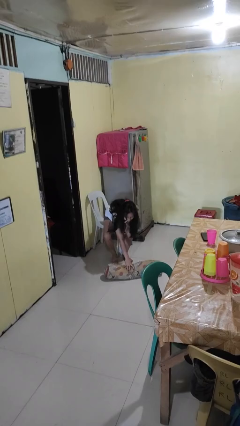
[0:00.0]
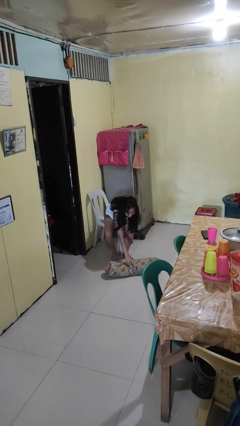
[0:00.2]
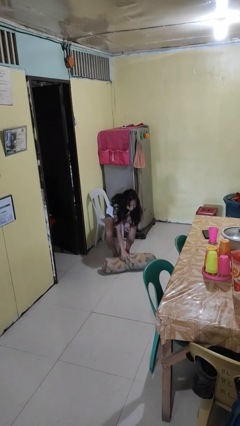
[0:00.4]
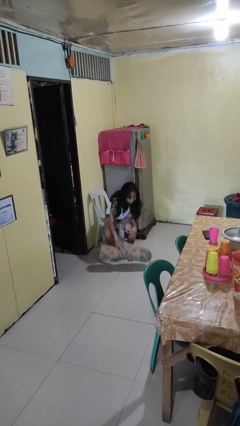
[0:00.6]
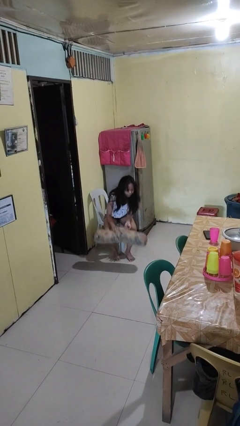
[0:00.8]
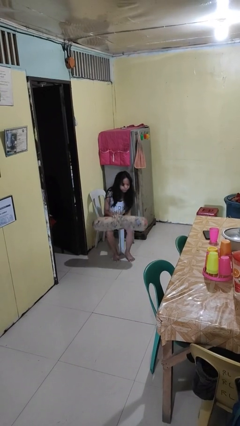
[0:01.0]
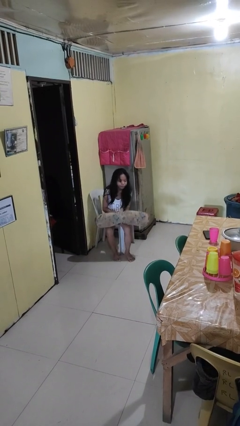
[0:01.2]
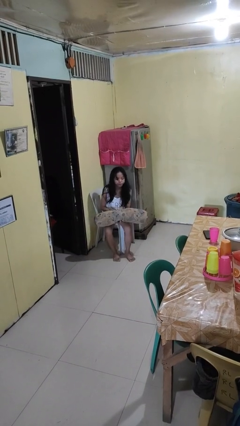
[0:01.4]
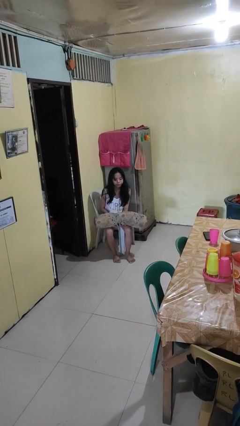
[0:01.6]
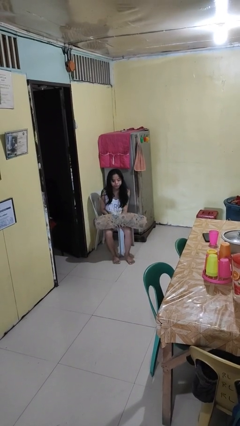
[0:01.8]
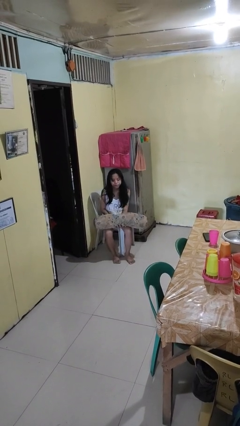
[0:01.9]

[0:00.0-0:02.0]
person picks up object from floor

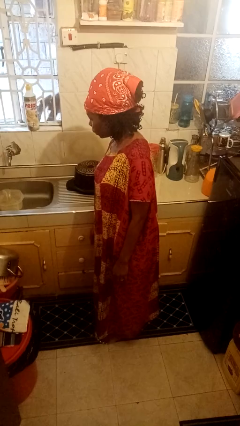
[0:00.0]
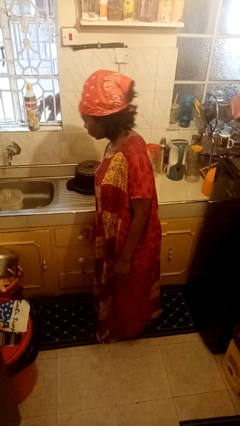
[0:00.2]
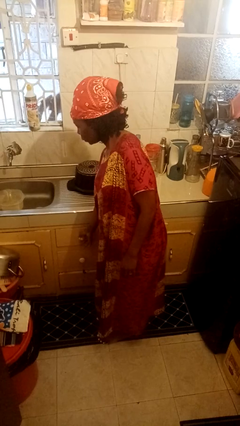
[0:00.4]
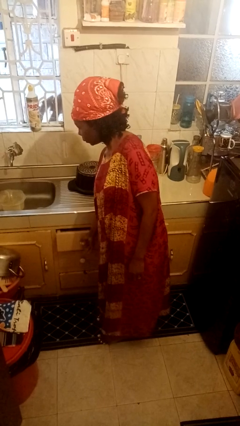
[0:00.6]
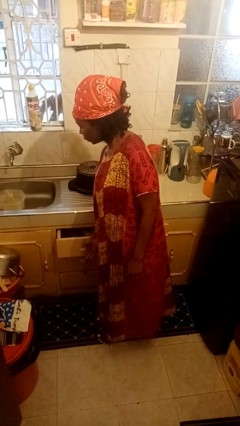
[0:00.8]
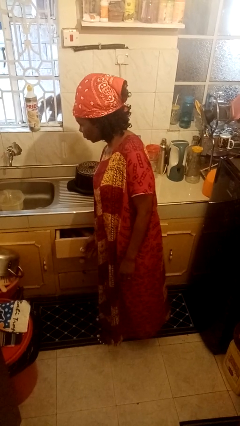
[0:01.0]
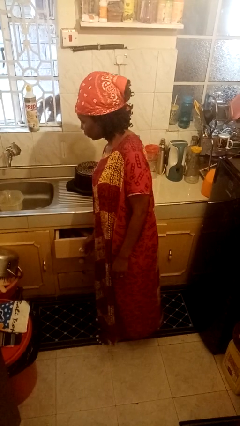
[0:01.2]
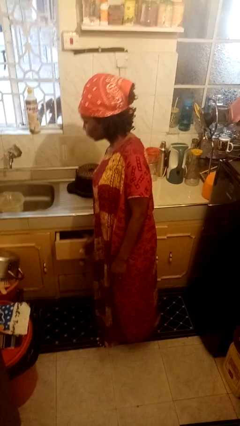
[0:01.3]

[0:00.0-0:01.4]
person opens kitchen drawer

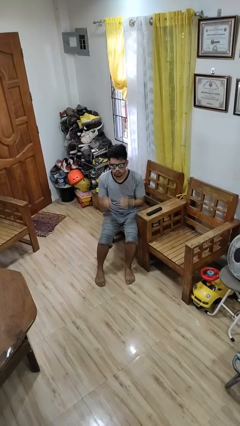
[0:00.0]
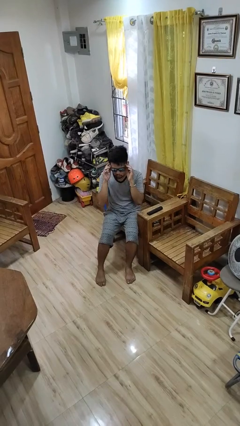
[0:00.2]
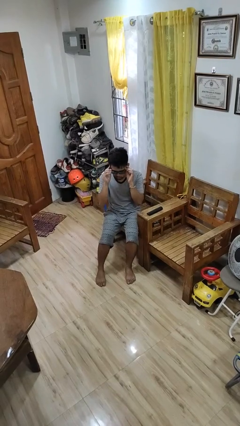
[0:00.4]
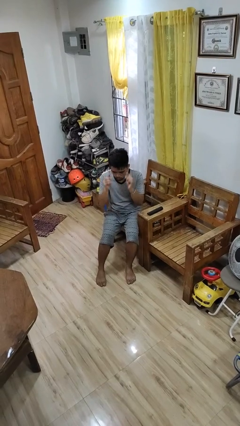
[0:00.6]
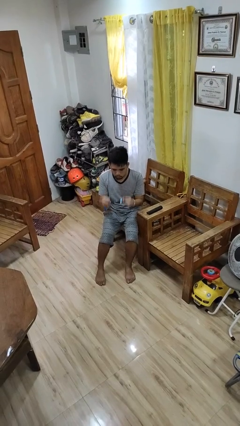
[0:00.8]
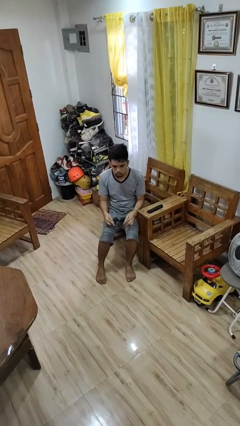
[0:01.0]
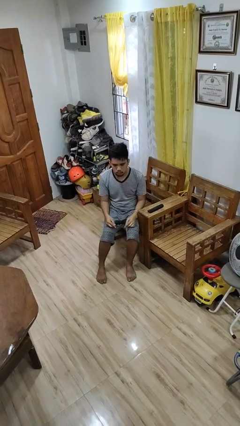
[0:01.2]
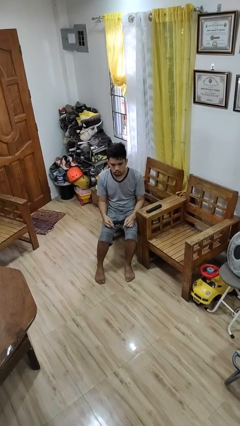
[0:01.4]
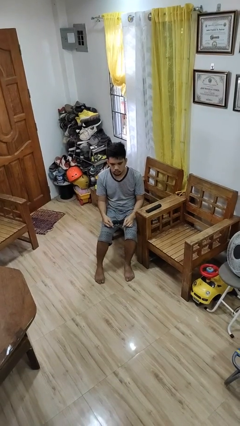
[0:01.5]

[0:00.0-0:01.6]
person takes off sunglasses

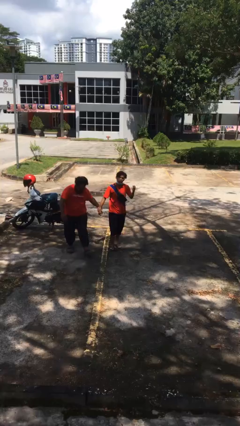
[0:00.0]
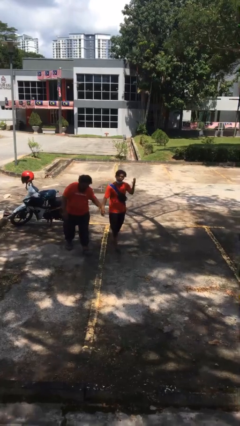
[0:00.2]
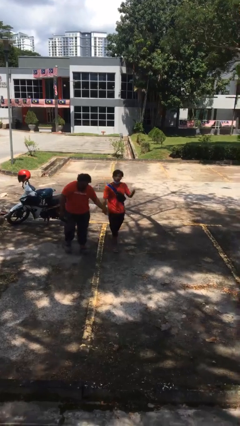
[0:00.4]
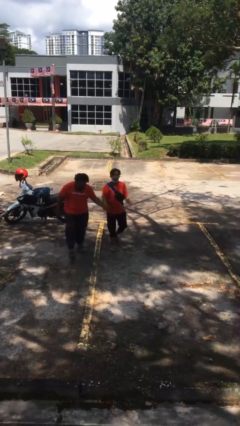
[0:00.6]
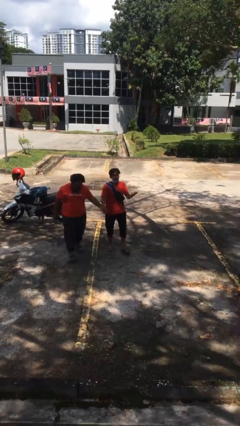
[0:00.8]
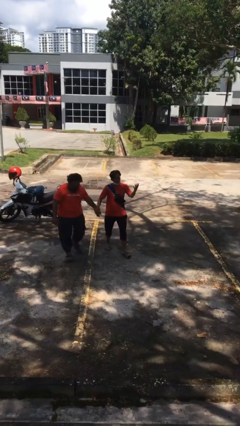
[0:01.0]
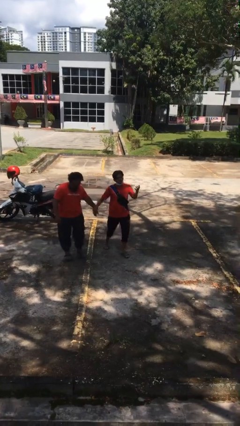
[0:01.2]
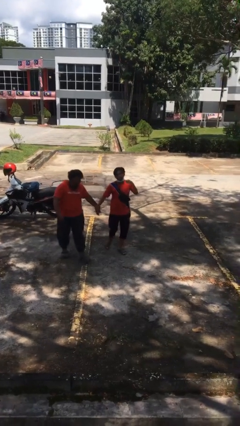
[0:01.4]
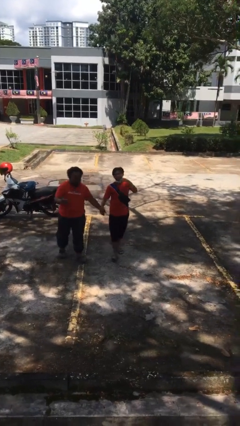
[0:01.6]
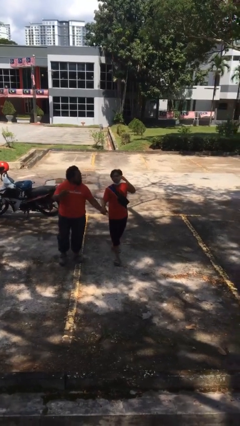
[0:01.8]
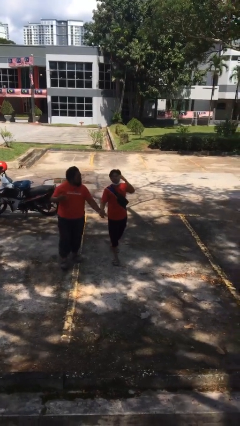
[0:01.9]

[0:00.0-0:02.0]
person holds hand

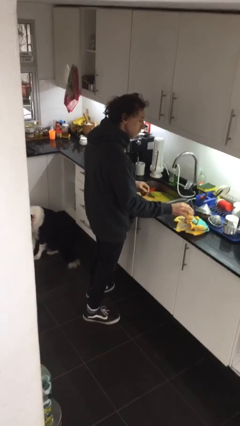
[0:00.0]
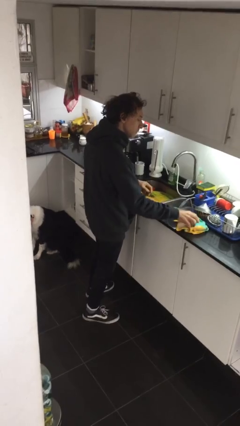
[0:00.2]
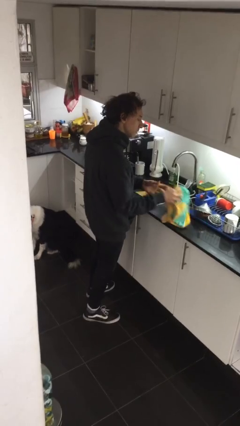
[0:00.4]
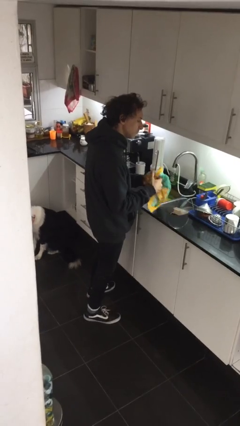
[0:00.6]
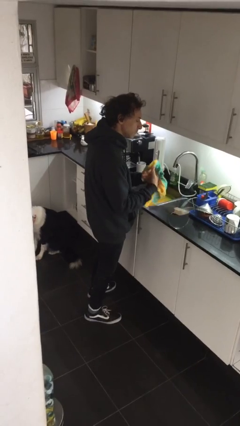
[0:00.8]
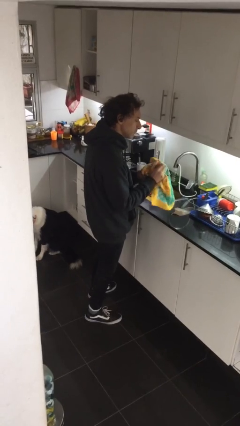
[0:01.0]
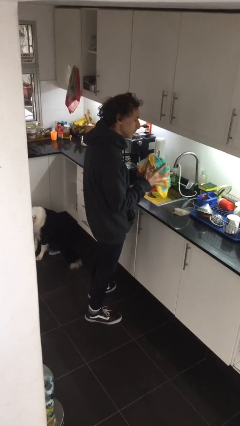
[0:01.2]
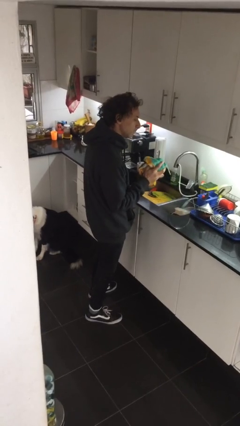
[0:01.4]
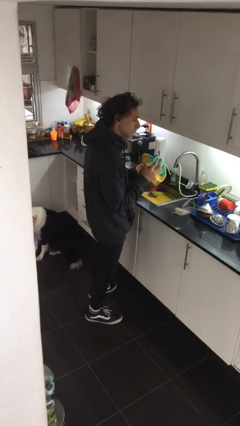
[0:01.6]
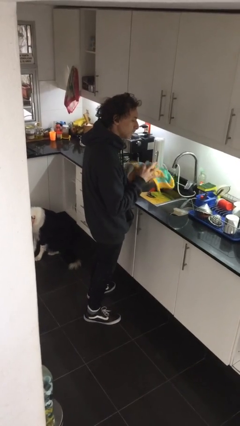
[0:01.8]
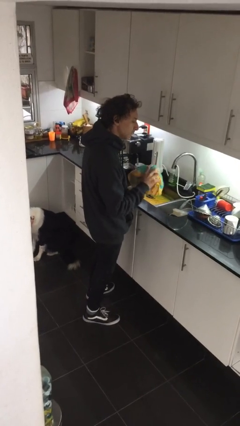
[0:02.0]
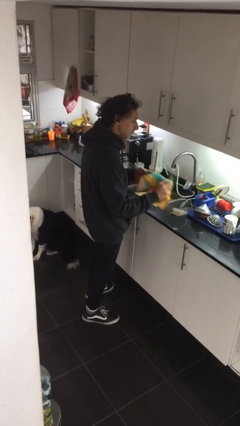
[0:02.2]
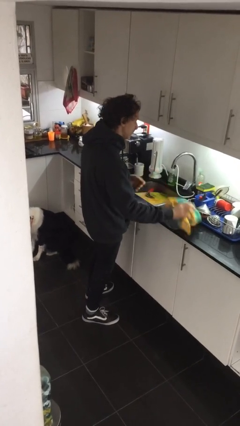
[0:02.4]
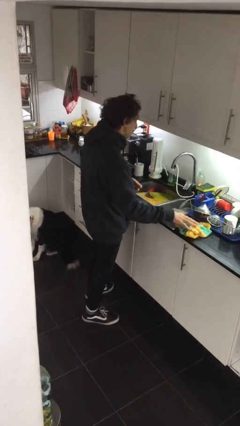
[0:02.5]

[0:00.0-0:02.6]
person dries hands with towel

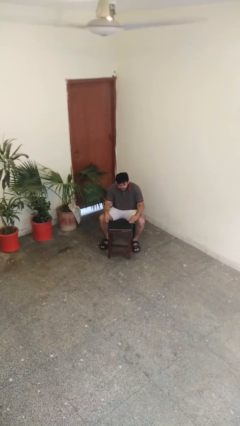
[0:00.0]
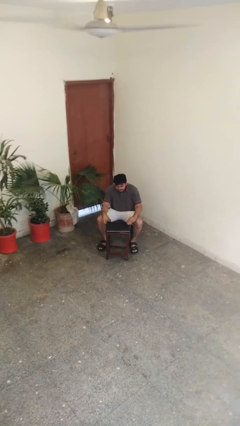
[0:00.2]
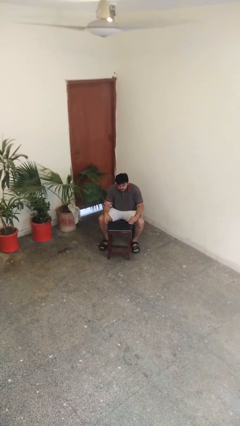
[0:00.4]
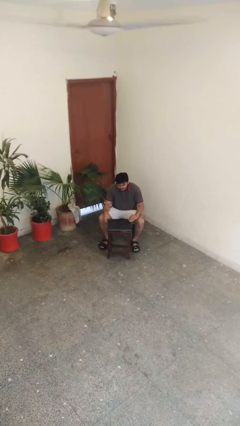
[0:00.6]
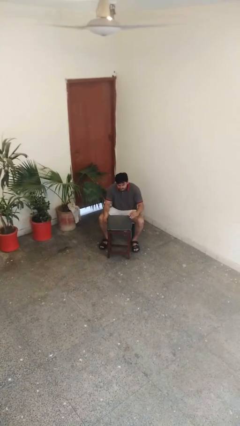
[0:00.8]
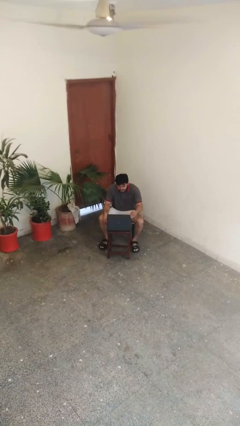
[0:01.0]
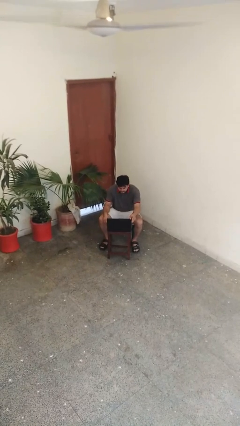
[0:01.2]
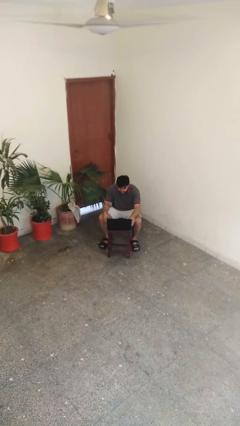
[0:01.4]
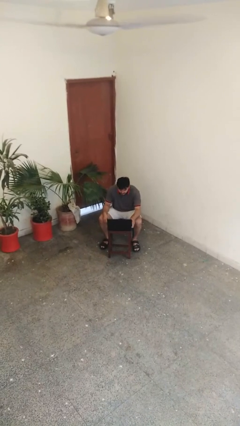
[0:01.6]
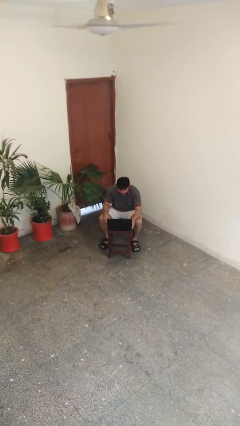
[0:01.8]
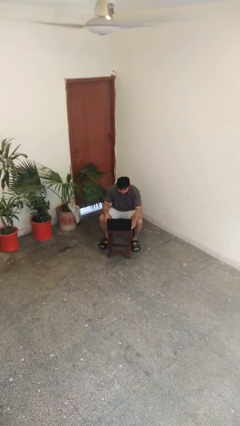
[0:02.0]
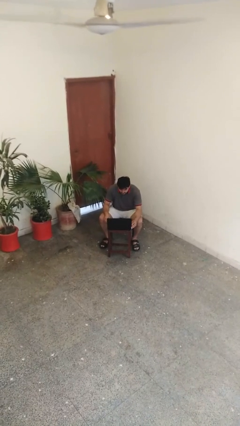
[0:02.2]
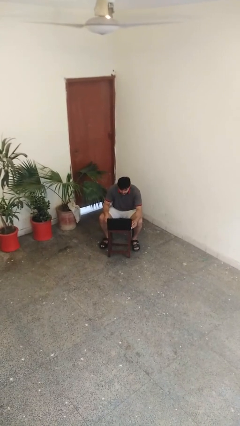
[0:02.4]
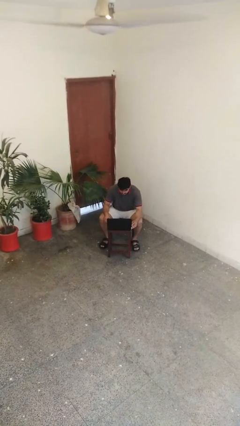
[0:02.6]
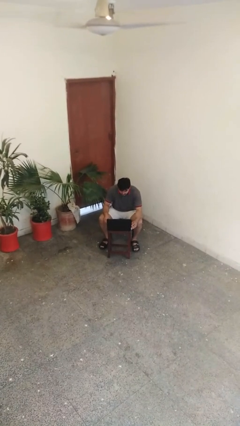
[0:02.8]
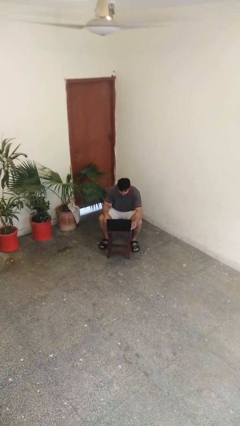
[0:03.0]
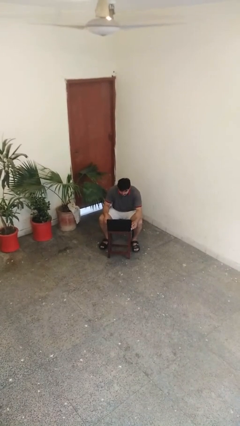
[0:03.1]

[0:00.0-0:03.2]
person opens laptop

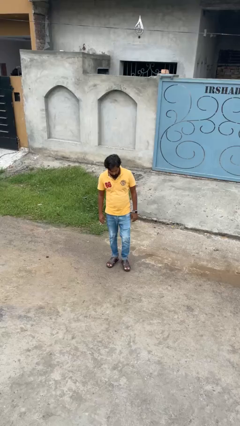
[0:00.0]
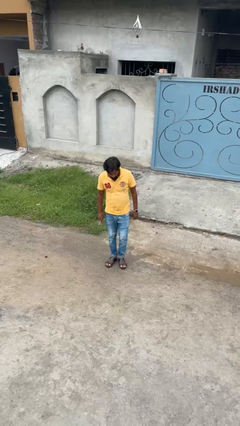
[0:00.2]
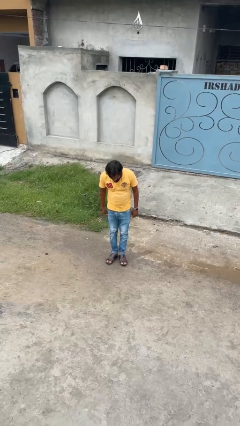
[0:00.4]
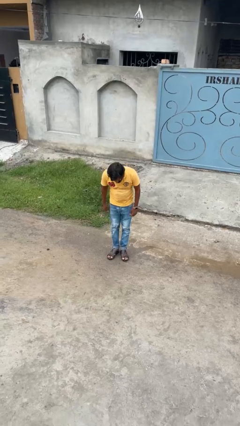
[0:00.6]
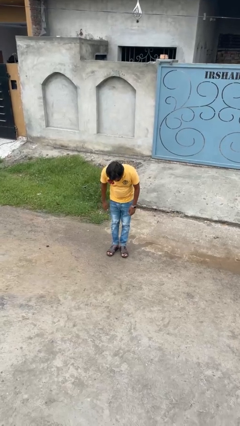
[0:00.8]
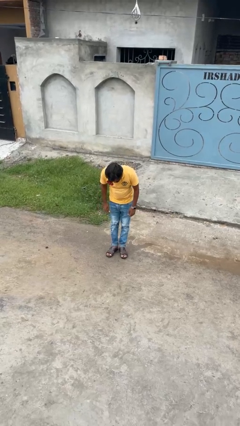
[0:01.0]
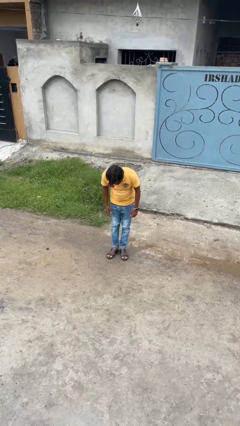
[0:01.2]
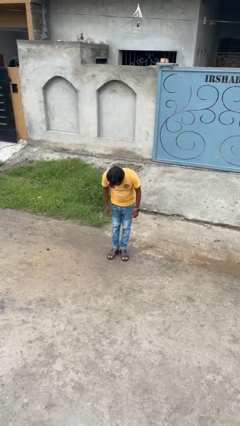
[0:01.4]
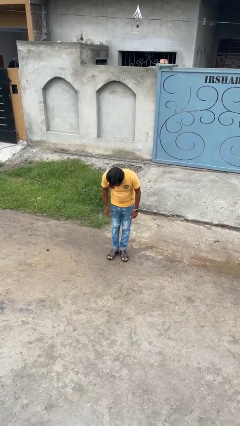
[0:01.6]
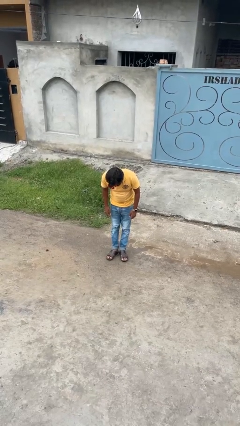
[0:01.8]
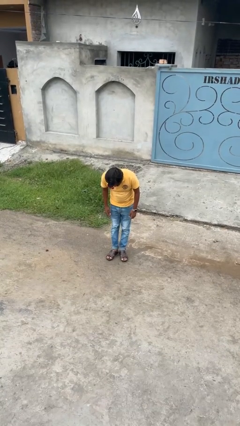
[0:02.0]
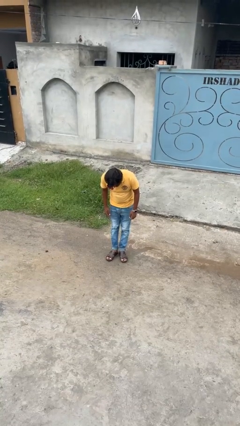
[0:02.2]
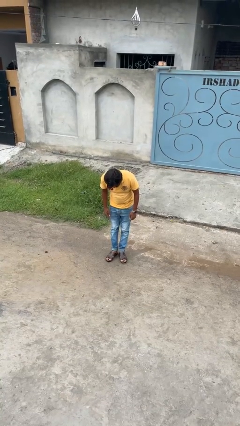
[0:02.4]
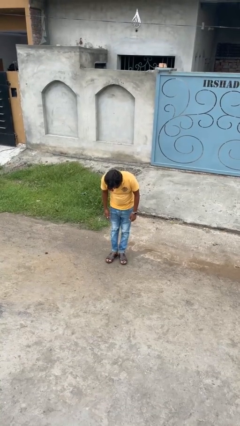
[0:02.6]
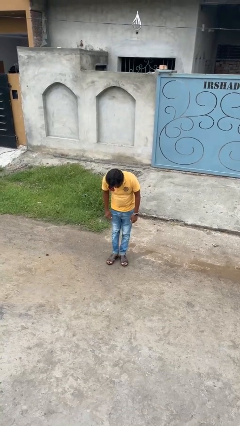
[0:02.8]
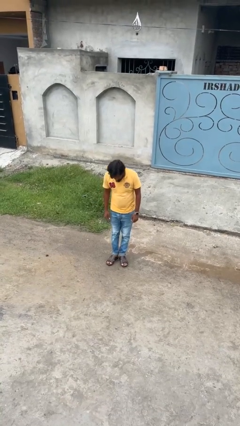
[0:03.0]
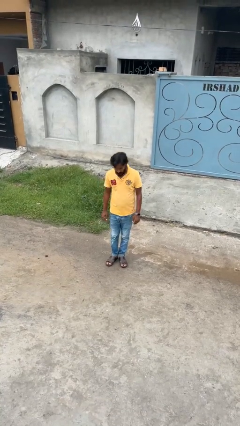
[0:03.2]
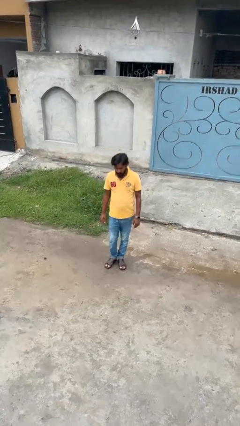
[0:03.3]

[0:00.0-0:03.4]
person bows

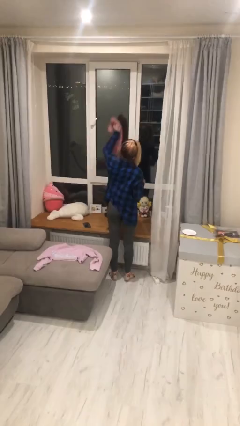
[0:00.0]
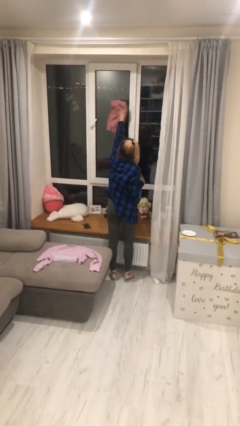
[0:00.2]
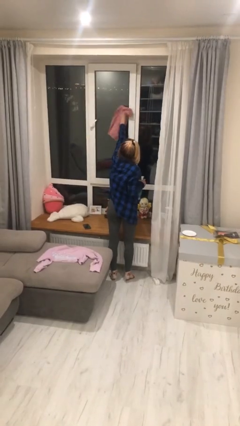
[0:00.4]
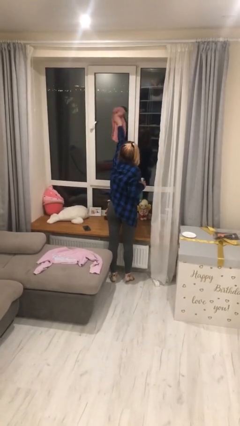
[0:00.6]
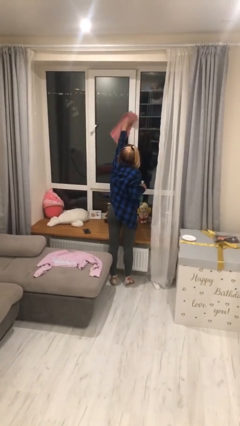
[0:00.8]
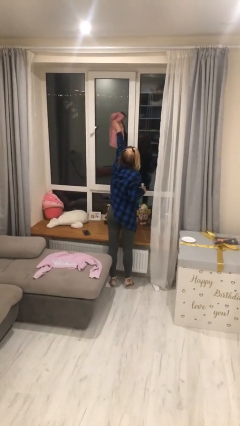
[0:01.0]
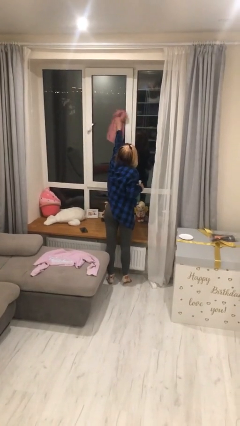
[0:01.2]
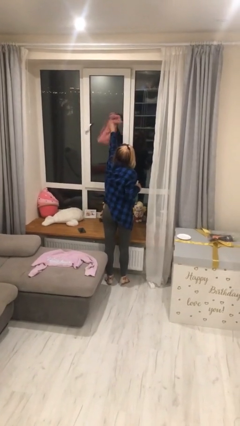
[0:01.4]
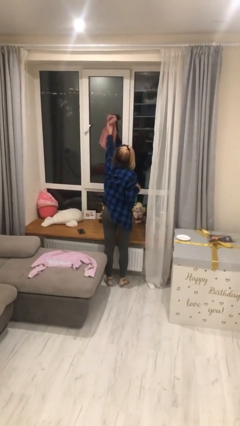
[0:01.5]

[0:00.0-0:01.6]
person washes window
